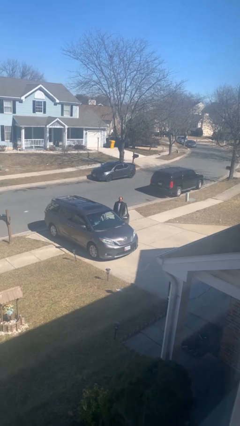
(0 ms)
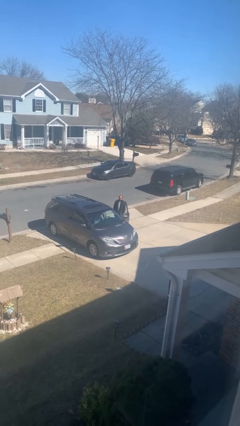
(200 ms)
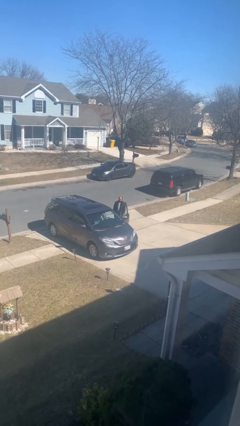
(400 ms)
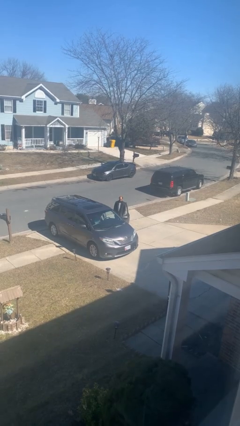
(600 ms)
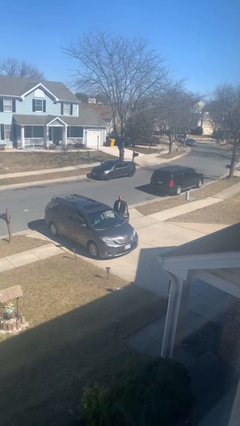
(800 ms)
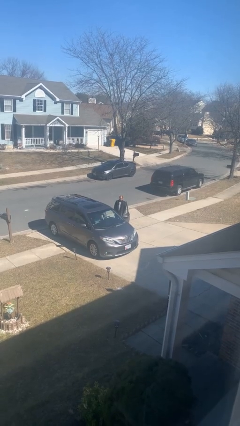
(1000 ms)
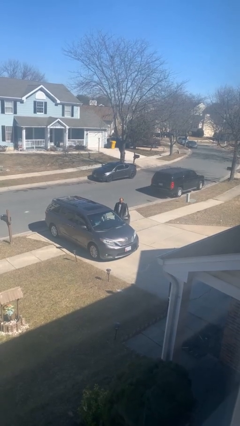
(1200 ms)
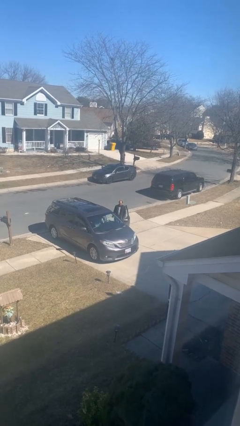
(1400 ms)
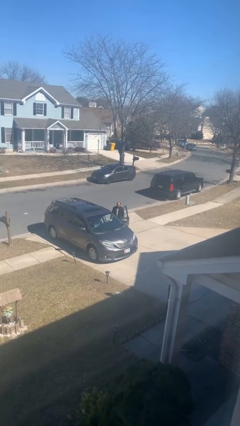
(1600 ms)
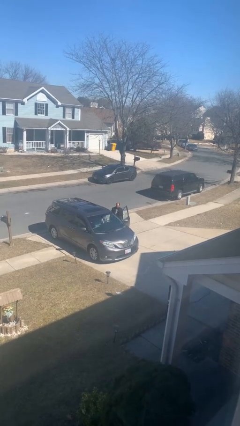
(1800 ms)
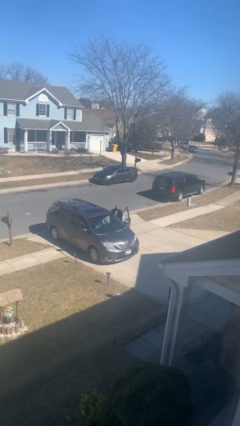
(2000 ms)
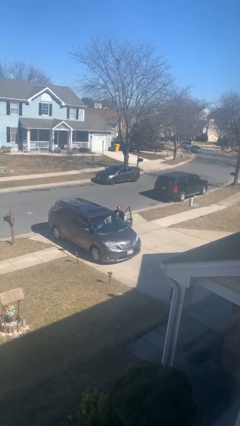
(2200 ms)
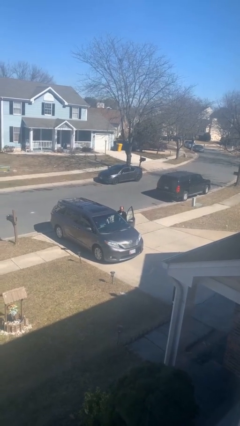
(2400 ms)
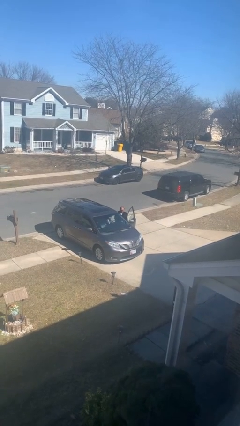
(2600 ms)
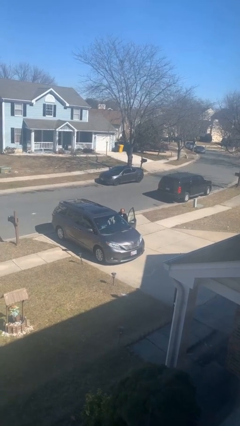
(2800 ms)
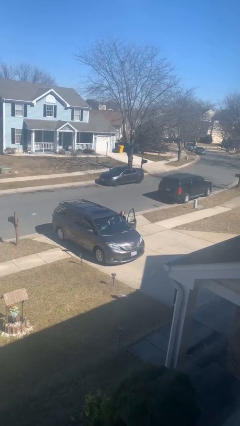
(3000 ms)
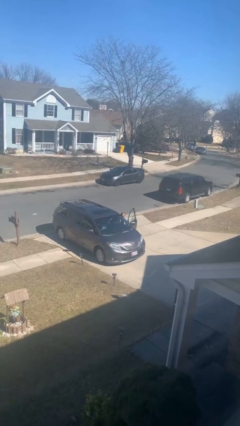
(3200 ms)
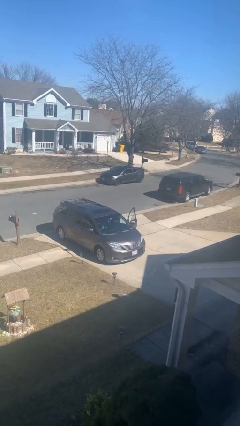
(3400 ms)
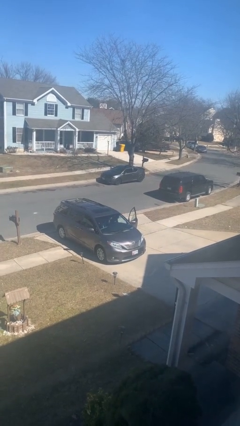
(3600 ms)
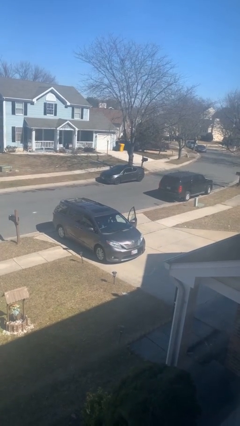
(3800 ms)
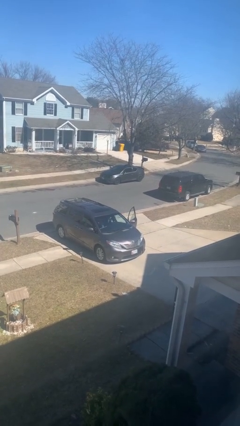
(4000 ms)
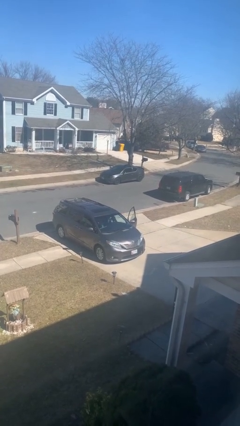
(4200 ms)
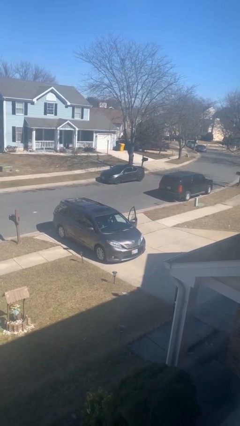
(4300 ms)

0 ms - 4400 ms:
person enters car

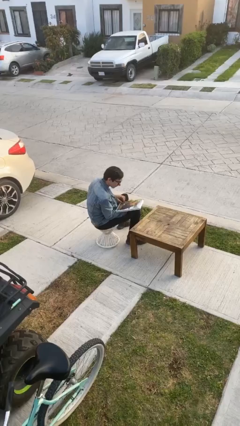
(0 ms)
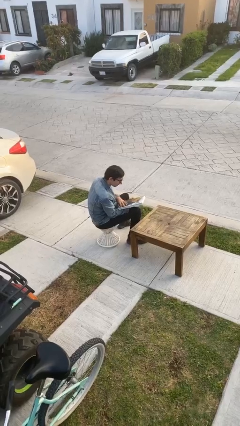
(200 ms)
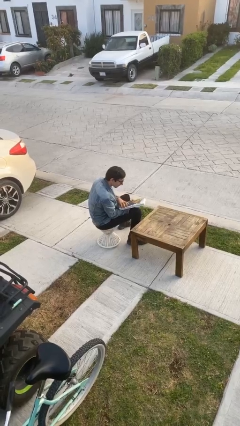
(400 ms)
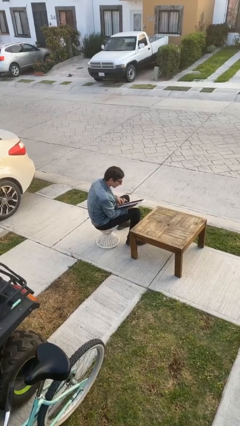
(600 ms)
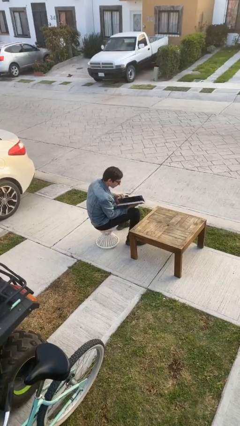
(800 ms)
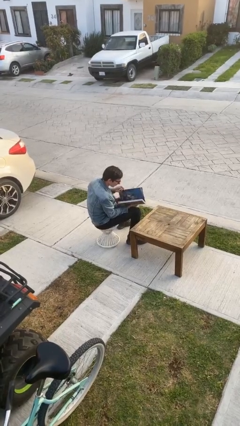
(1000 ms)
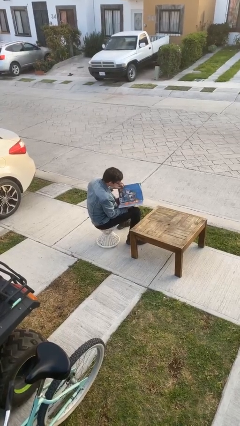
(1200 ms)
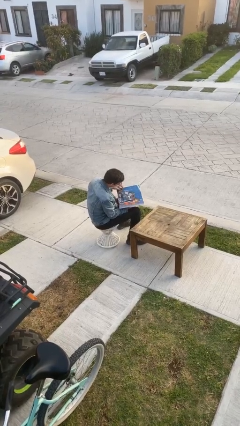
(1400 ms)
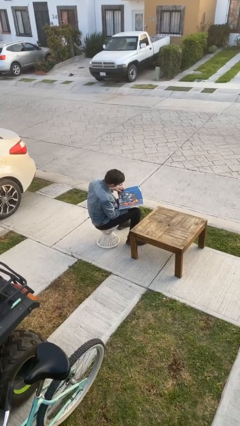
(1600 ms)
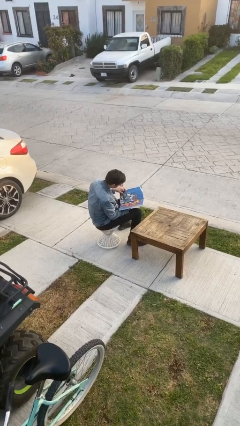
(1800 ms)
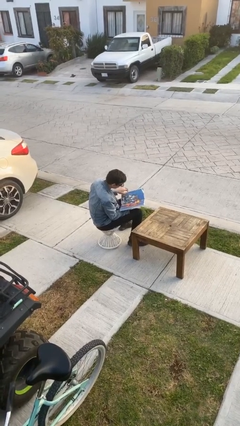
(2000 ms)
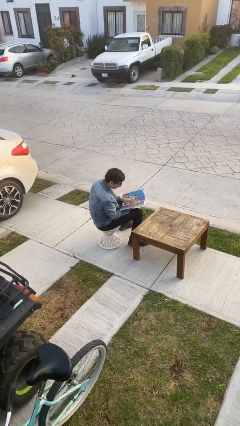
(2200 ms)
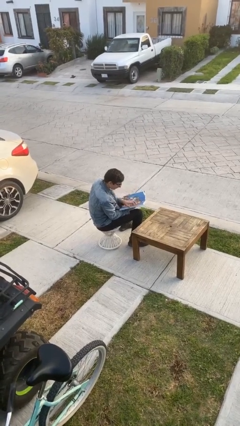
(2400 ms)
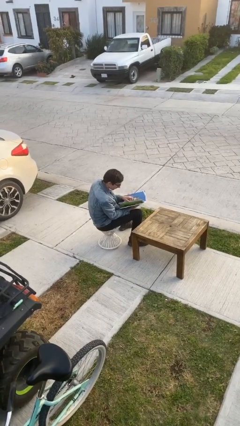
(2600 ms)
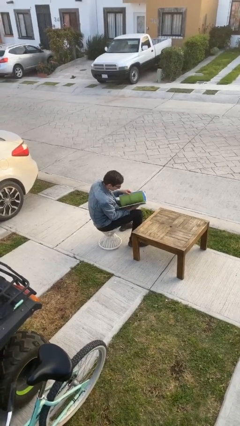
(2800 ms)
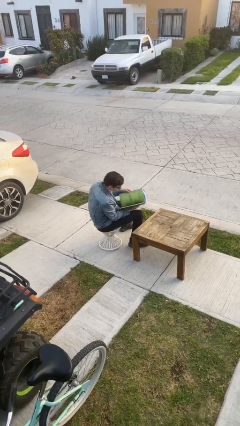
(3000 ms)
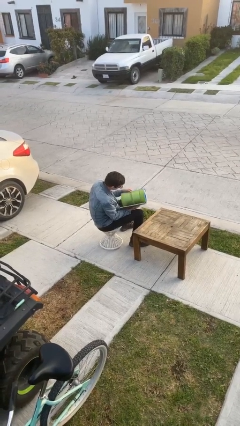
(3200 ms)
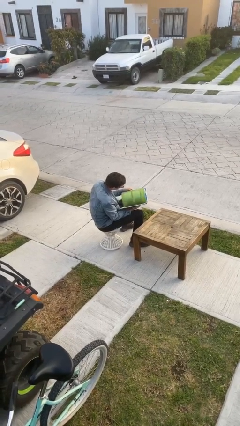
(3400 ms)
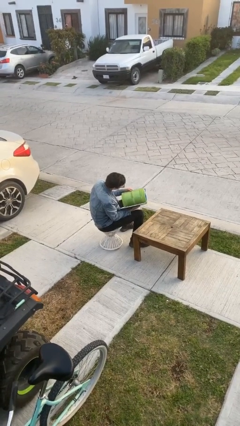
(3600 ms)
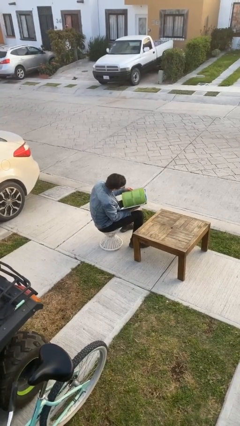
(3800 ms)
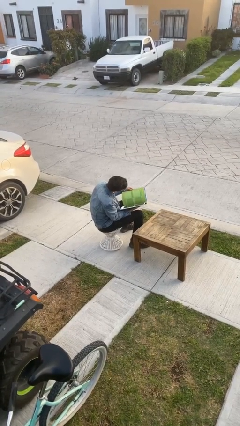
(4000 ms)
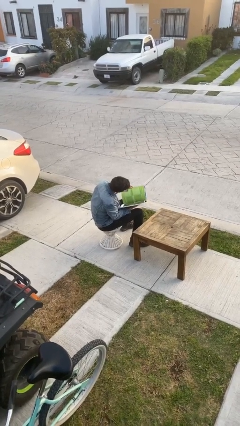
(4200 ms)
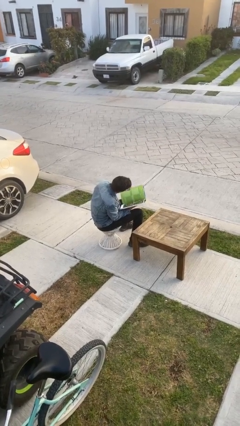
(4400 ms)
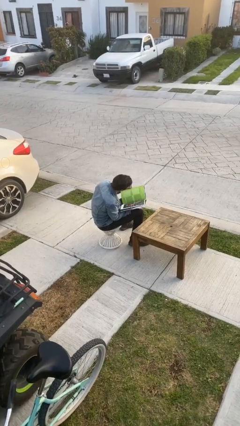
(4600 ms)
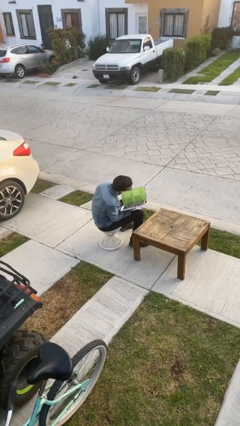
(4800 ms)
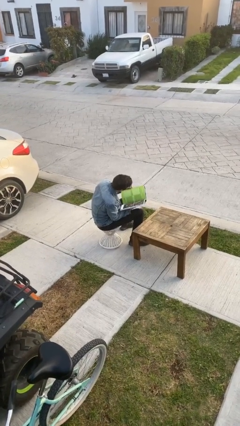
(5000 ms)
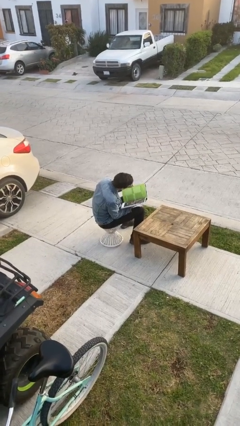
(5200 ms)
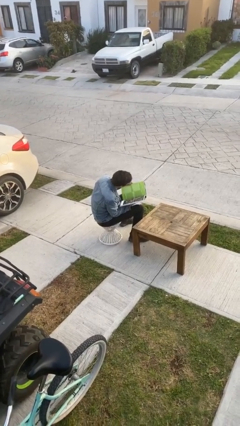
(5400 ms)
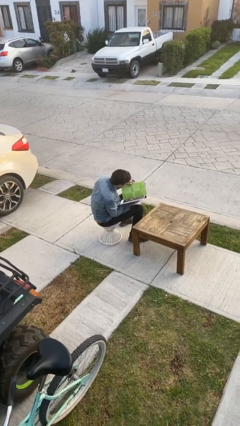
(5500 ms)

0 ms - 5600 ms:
person reads document

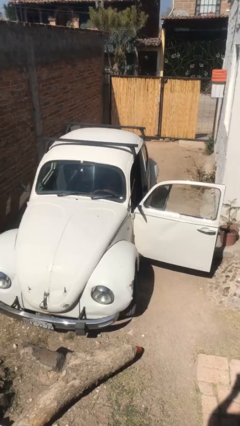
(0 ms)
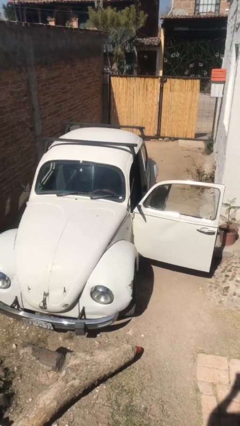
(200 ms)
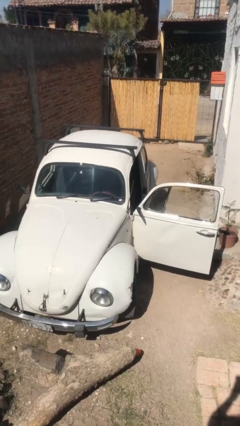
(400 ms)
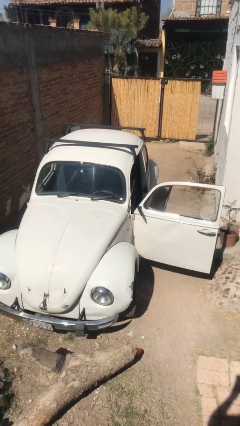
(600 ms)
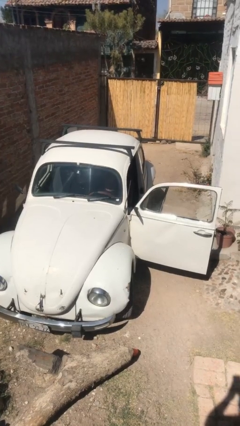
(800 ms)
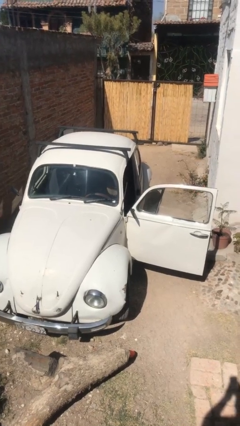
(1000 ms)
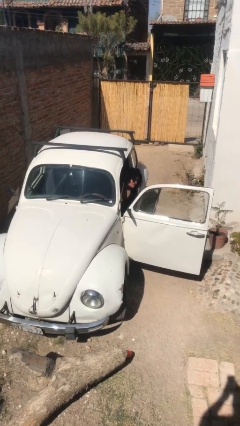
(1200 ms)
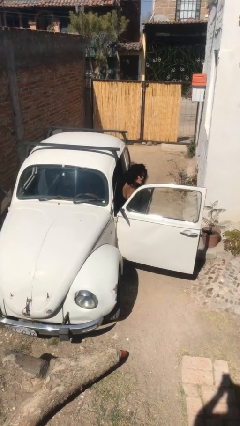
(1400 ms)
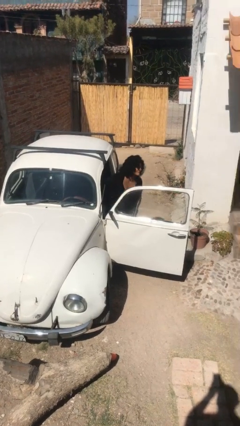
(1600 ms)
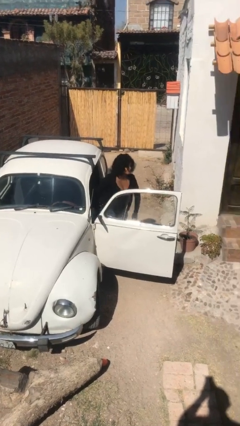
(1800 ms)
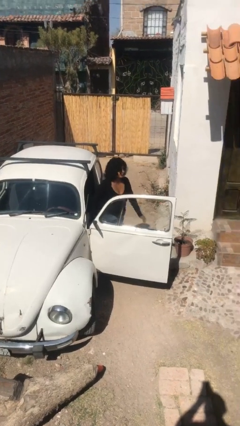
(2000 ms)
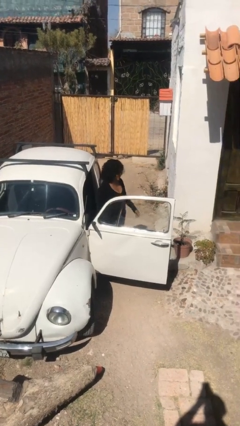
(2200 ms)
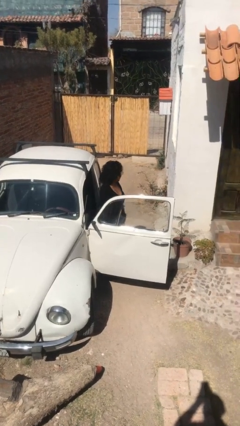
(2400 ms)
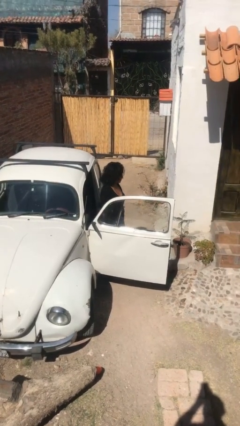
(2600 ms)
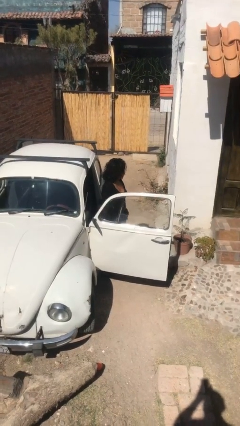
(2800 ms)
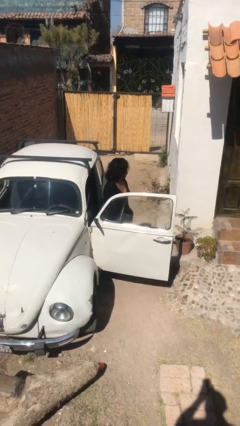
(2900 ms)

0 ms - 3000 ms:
person exits car

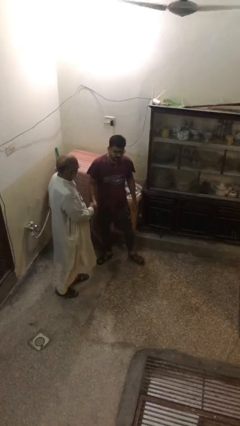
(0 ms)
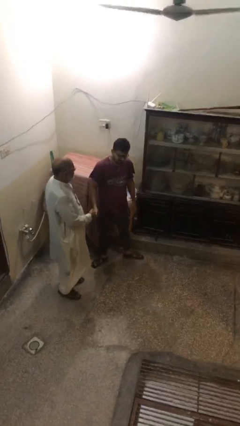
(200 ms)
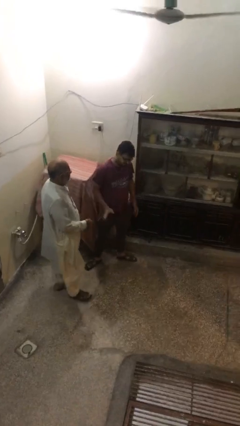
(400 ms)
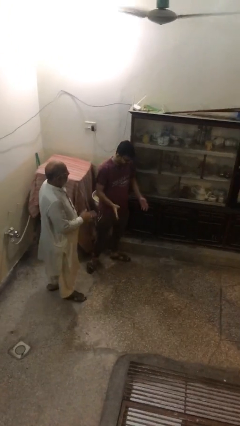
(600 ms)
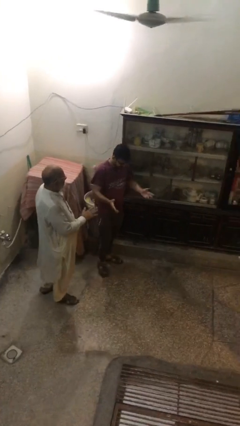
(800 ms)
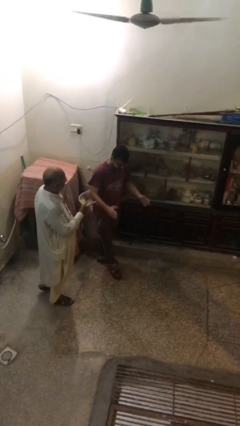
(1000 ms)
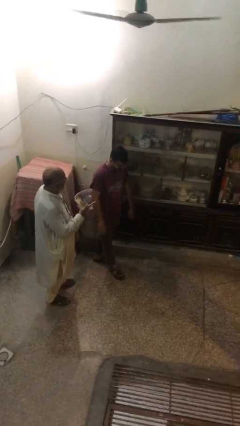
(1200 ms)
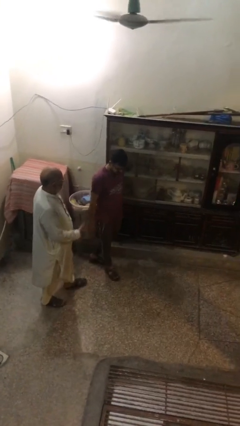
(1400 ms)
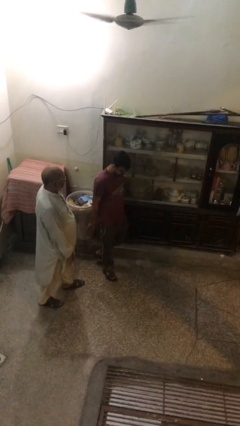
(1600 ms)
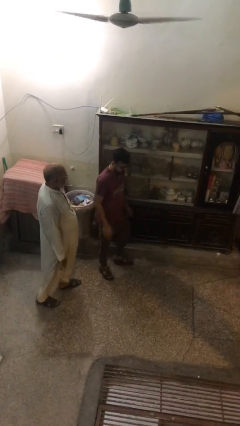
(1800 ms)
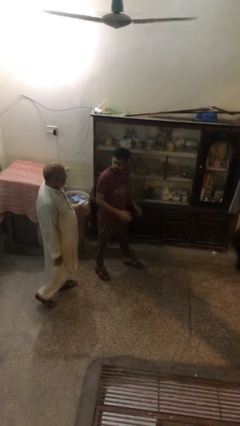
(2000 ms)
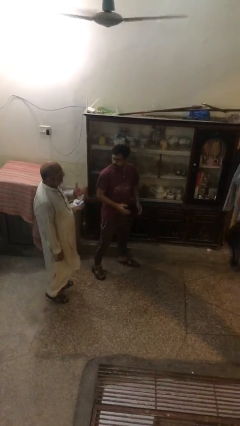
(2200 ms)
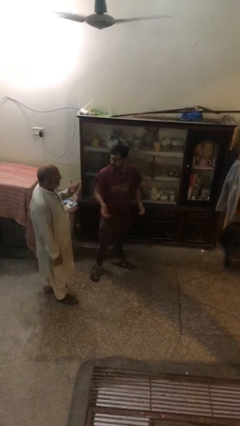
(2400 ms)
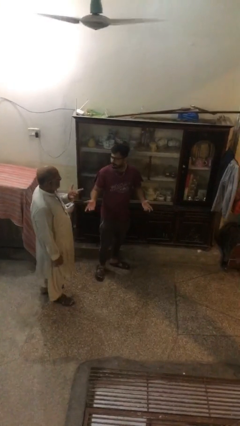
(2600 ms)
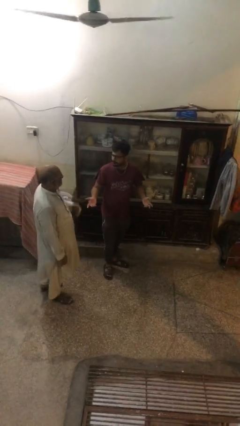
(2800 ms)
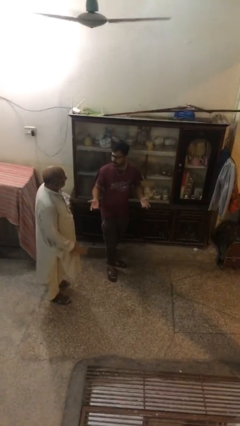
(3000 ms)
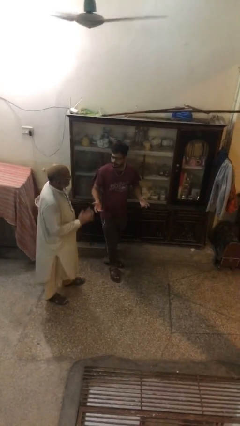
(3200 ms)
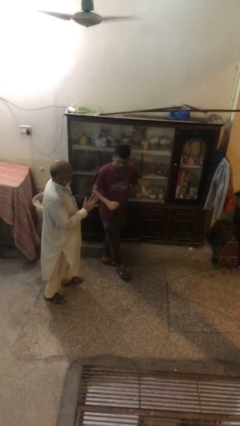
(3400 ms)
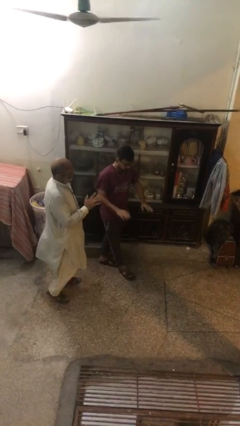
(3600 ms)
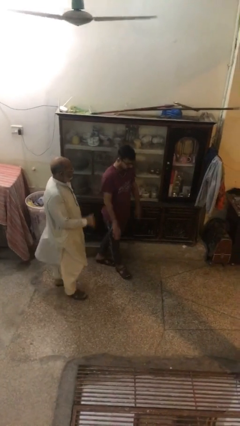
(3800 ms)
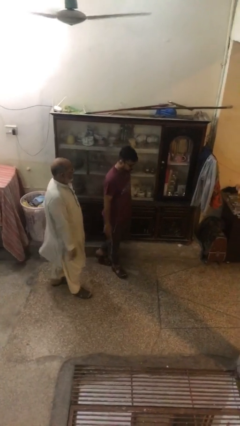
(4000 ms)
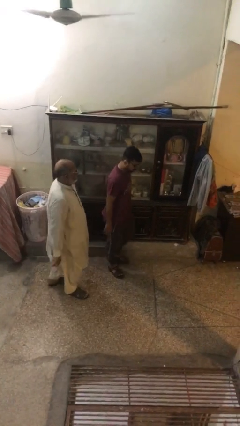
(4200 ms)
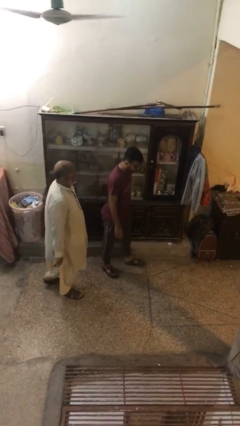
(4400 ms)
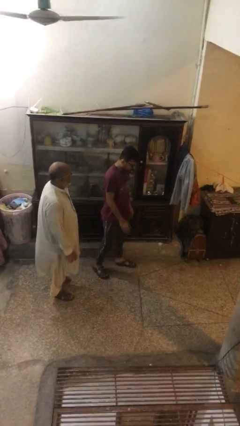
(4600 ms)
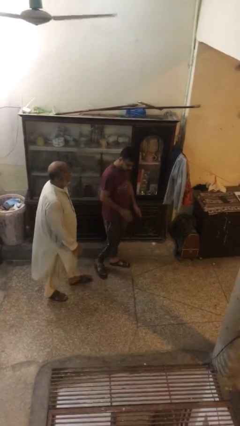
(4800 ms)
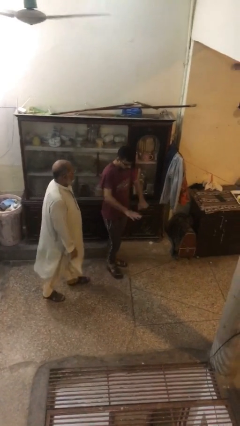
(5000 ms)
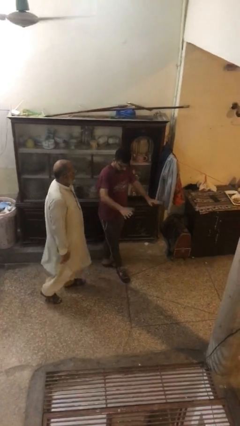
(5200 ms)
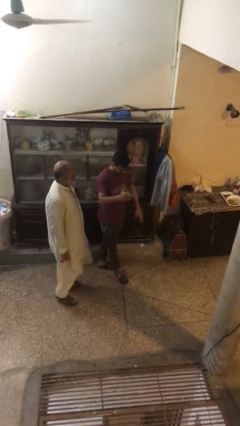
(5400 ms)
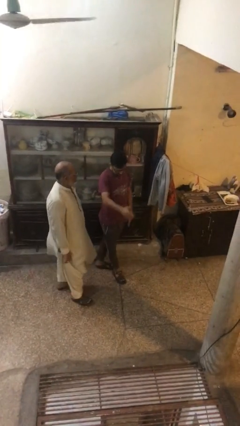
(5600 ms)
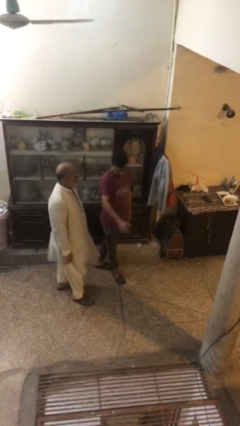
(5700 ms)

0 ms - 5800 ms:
person talks to person
